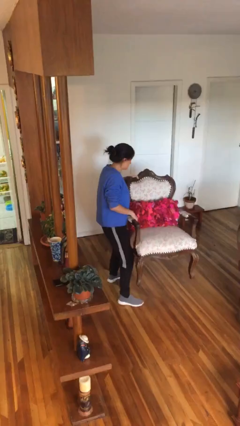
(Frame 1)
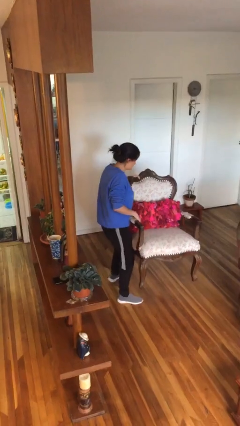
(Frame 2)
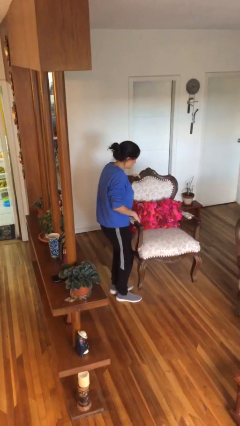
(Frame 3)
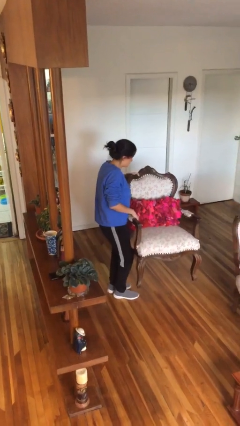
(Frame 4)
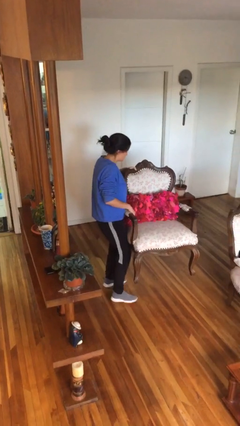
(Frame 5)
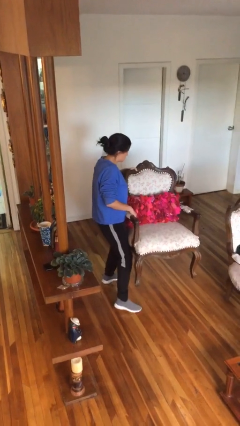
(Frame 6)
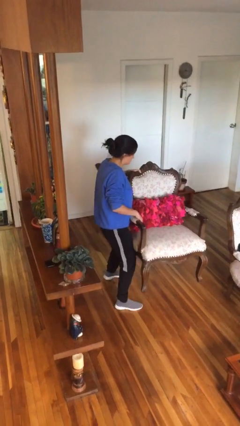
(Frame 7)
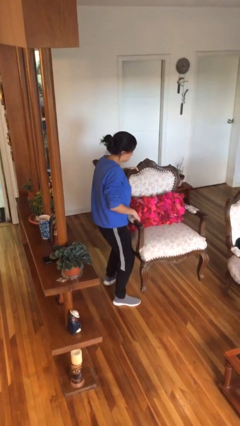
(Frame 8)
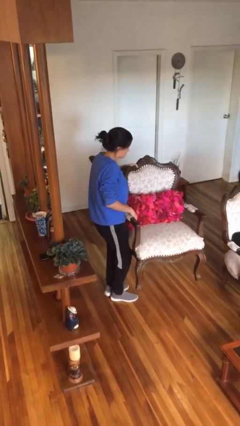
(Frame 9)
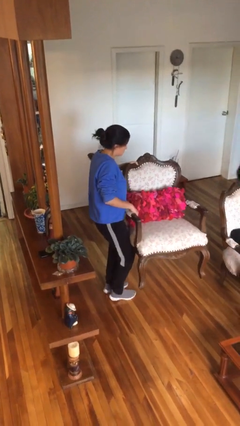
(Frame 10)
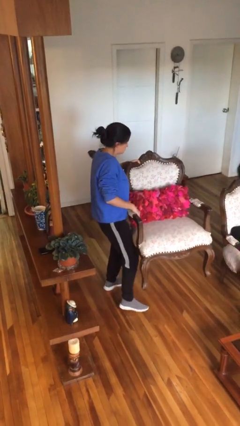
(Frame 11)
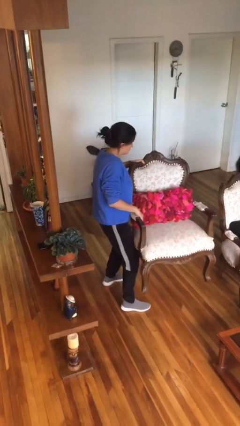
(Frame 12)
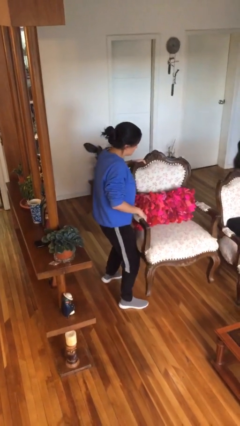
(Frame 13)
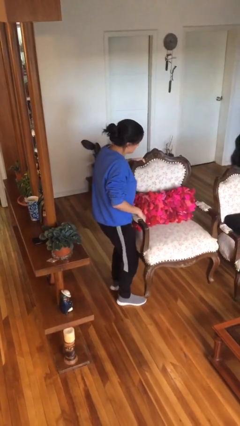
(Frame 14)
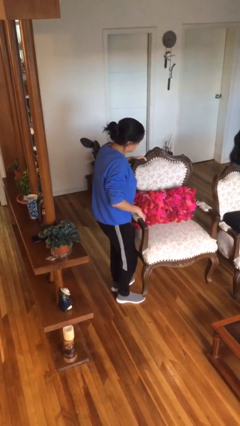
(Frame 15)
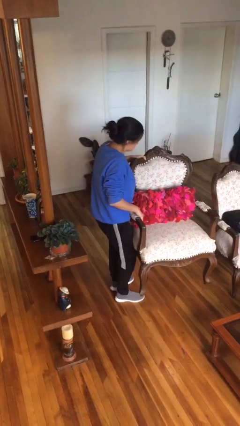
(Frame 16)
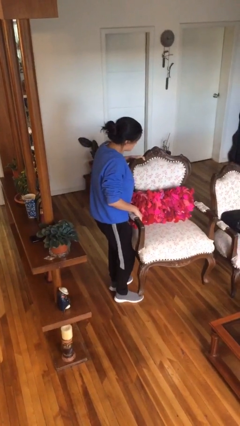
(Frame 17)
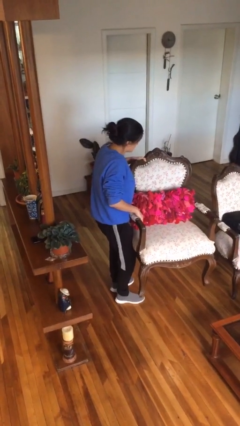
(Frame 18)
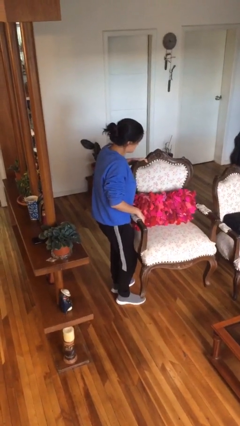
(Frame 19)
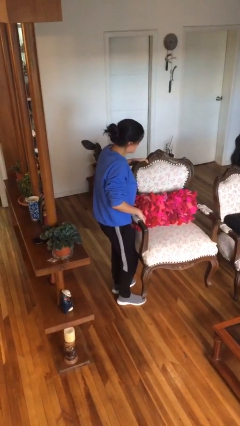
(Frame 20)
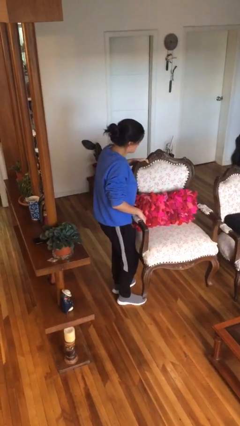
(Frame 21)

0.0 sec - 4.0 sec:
person carries furniture

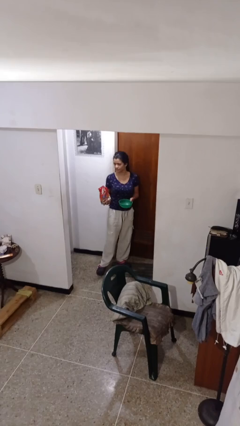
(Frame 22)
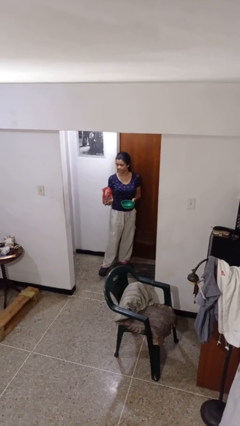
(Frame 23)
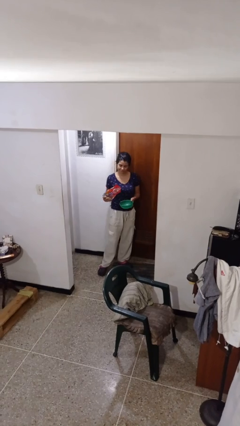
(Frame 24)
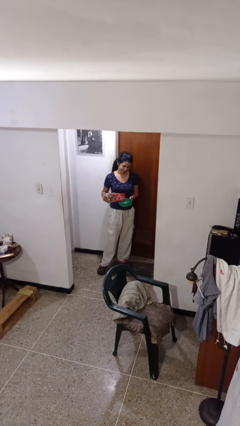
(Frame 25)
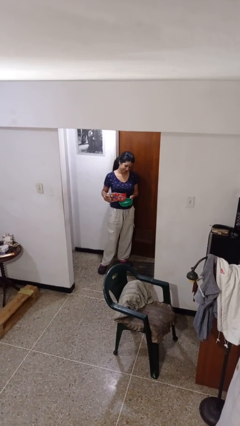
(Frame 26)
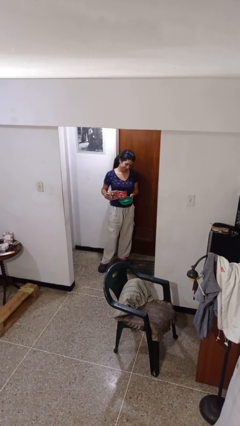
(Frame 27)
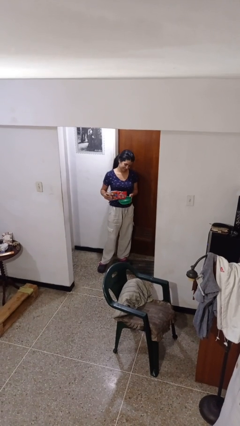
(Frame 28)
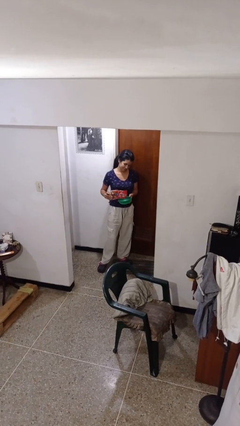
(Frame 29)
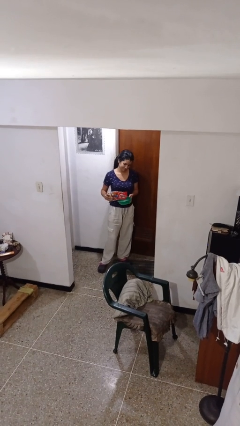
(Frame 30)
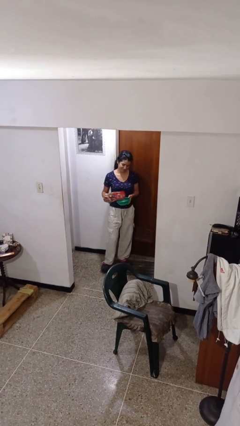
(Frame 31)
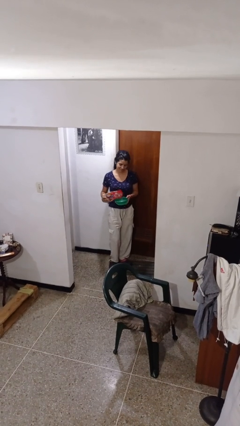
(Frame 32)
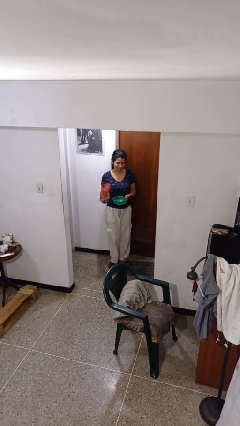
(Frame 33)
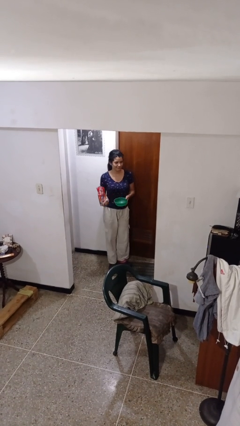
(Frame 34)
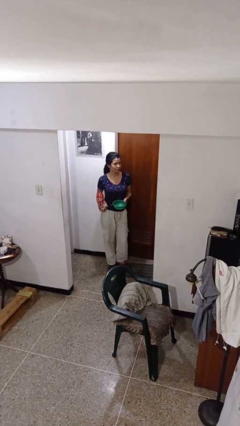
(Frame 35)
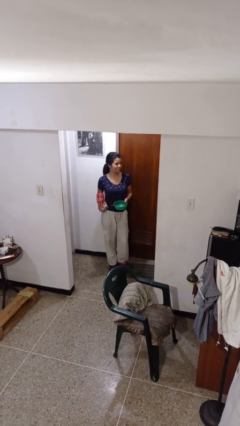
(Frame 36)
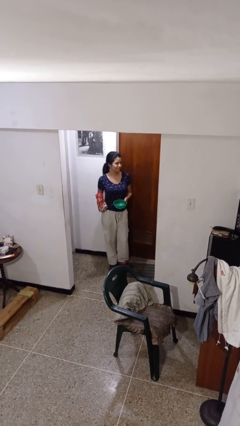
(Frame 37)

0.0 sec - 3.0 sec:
person pours into bowl

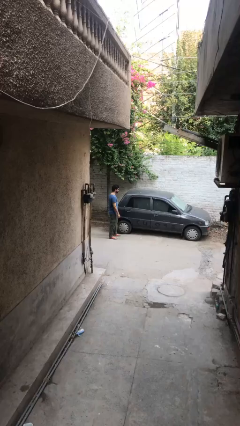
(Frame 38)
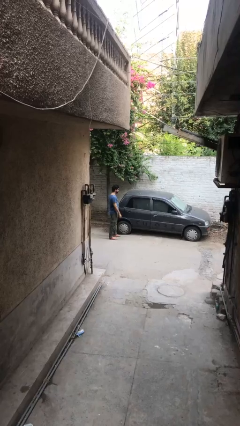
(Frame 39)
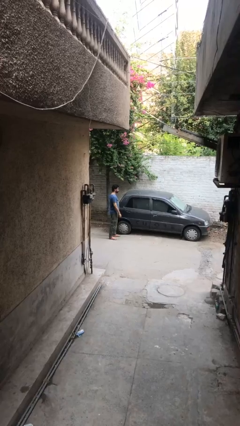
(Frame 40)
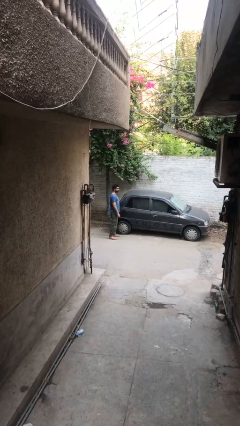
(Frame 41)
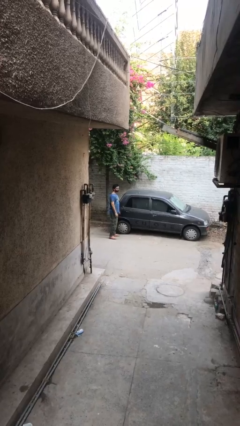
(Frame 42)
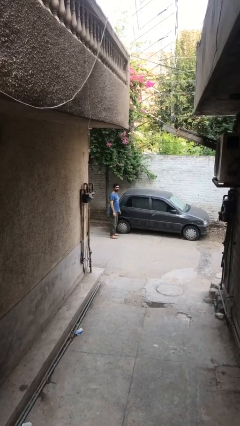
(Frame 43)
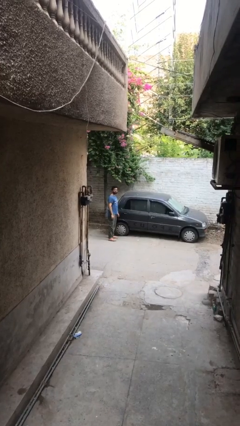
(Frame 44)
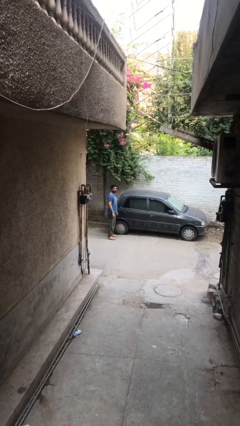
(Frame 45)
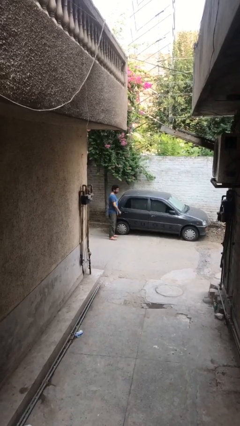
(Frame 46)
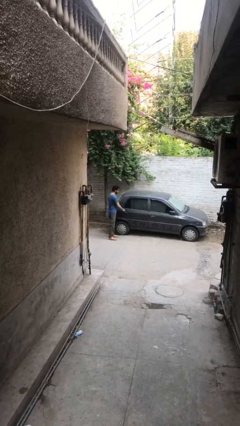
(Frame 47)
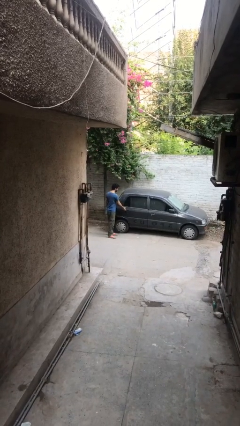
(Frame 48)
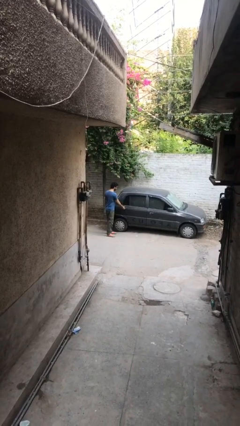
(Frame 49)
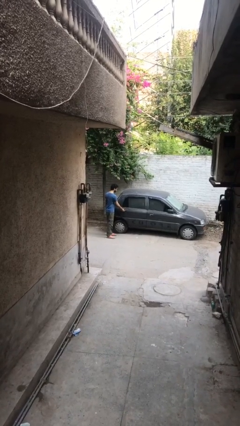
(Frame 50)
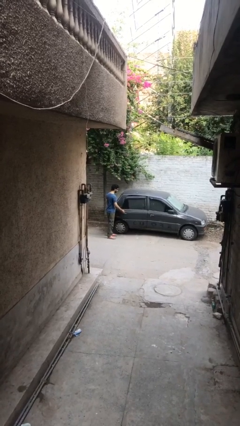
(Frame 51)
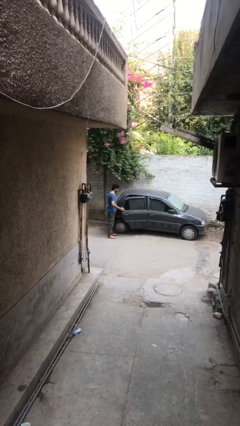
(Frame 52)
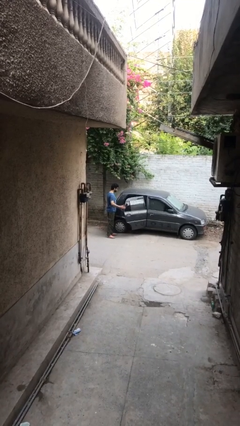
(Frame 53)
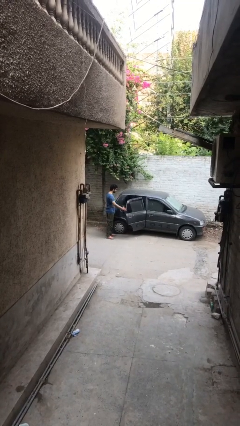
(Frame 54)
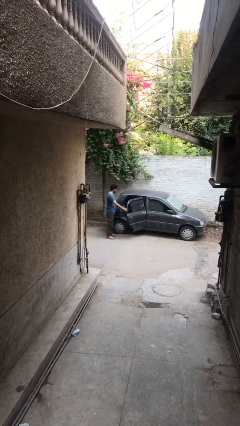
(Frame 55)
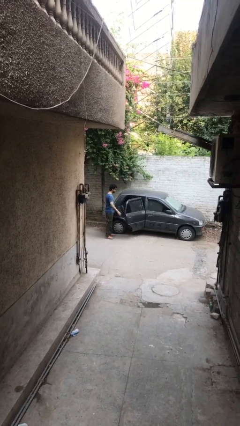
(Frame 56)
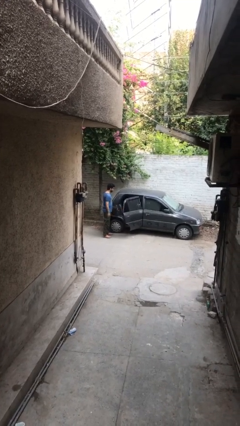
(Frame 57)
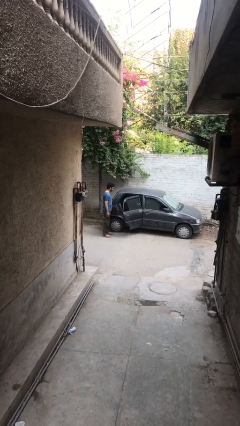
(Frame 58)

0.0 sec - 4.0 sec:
person opens car door

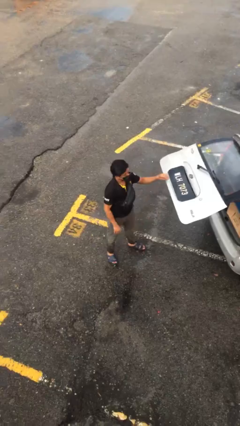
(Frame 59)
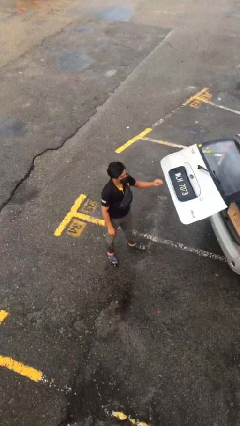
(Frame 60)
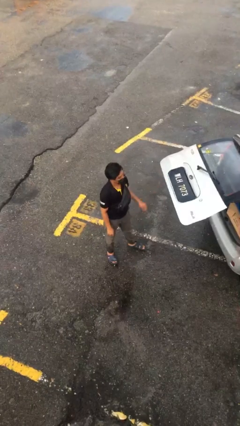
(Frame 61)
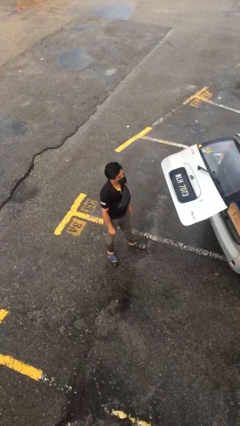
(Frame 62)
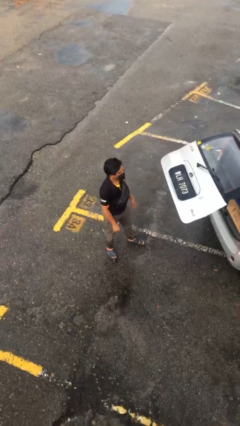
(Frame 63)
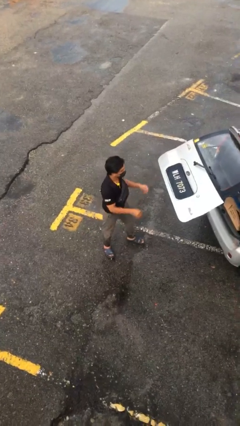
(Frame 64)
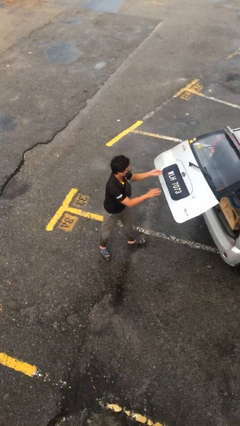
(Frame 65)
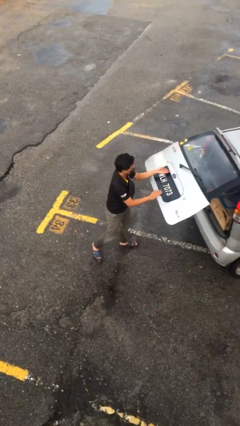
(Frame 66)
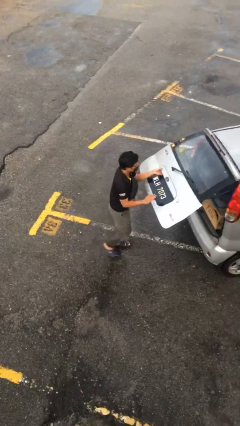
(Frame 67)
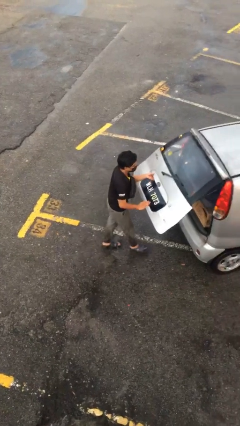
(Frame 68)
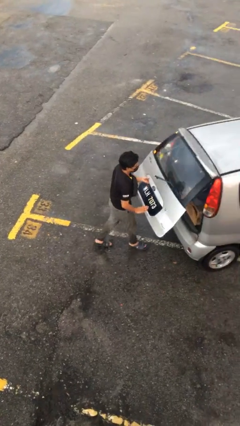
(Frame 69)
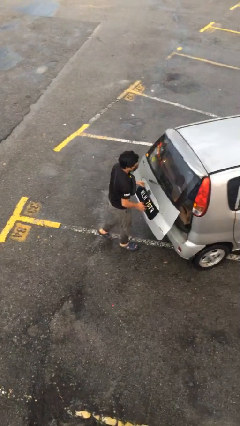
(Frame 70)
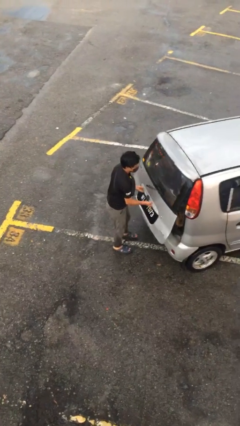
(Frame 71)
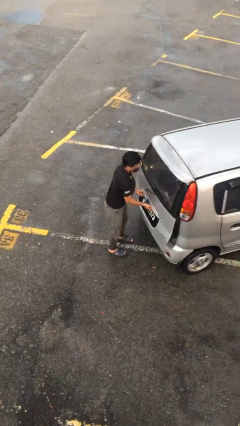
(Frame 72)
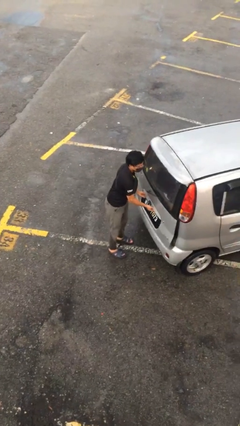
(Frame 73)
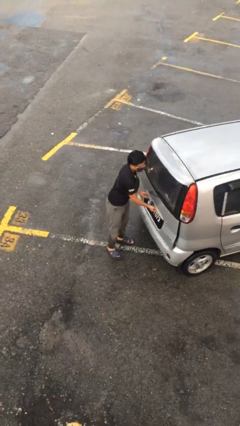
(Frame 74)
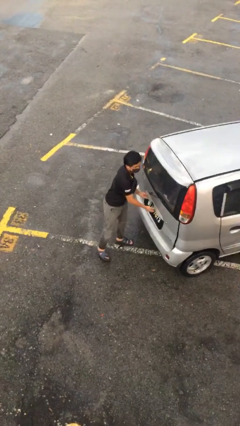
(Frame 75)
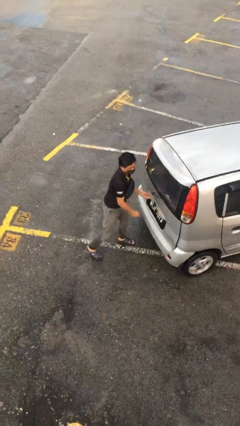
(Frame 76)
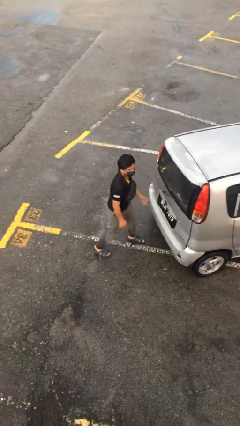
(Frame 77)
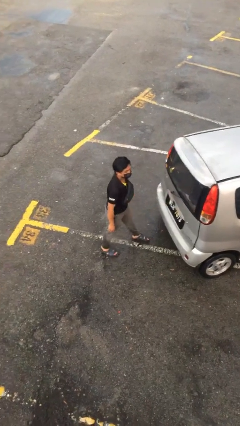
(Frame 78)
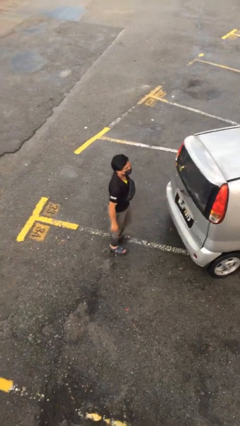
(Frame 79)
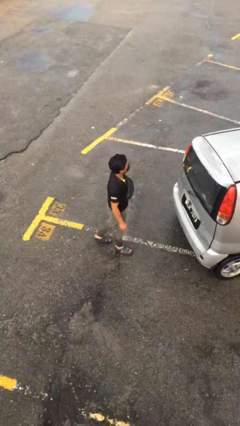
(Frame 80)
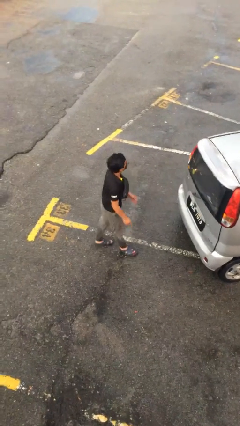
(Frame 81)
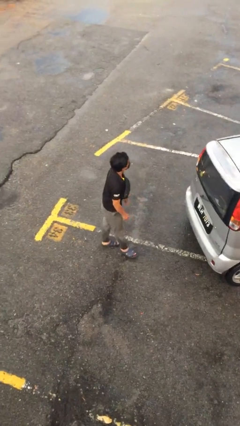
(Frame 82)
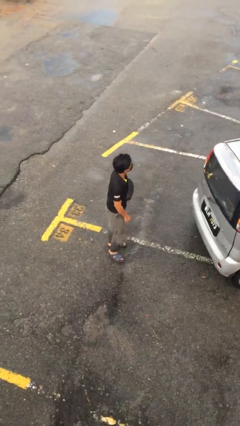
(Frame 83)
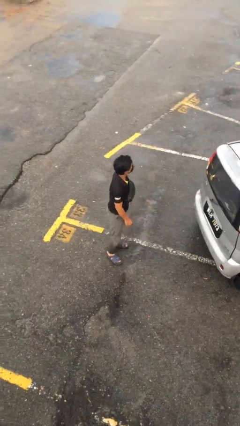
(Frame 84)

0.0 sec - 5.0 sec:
person closes car trunk

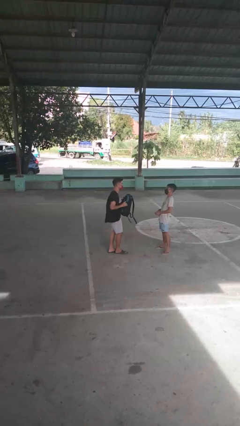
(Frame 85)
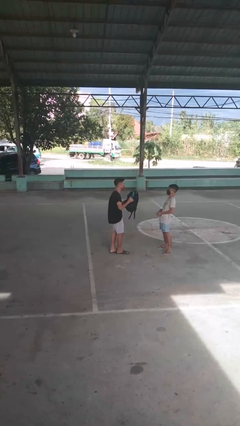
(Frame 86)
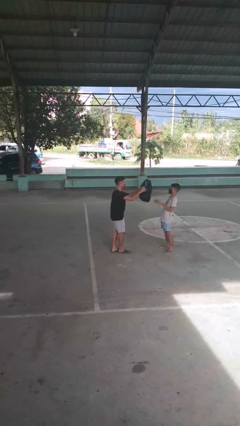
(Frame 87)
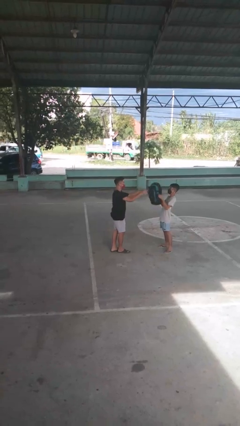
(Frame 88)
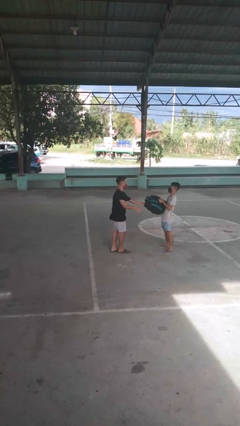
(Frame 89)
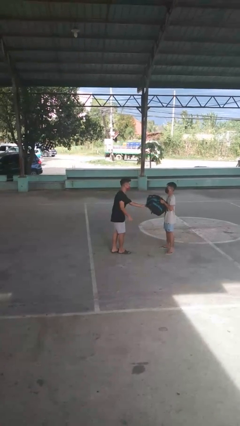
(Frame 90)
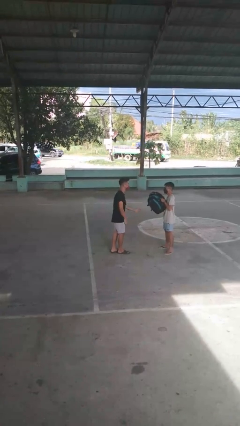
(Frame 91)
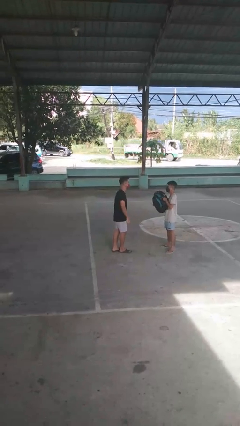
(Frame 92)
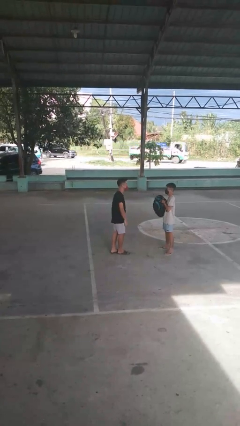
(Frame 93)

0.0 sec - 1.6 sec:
person throws object to person
